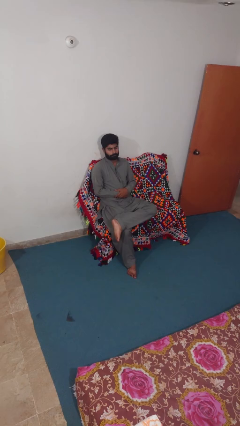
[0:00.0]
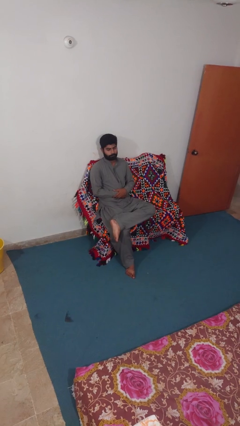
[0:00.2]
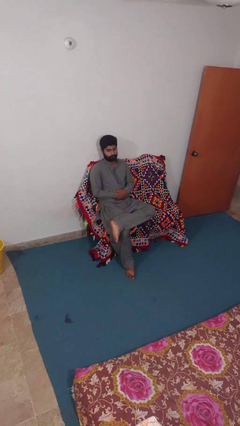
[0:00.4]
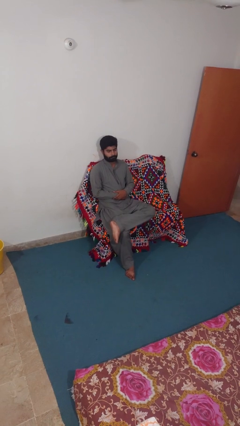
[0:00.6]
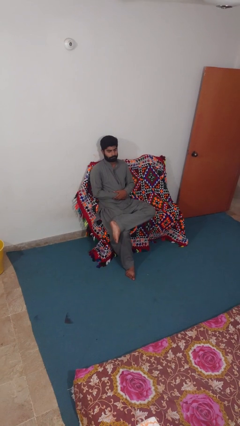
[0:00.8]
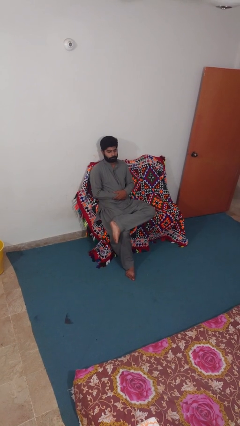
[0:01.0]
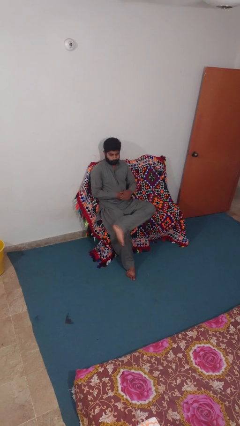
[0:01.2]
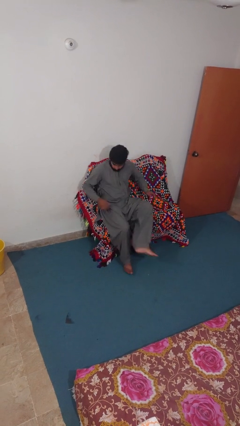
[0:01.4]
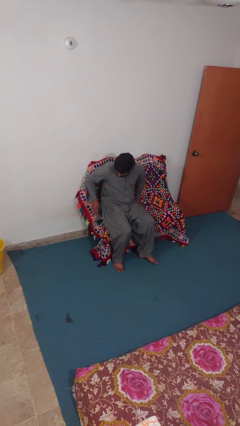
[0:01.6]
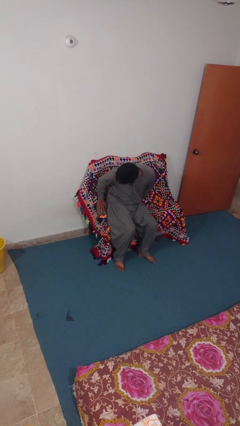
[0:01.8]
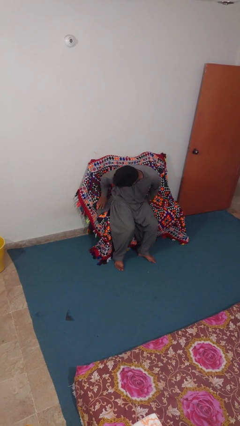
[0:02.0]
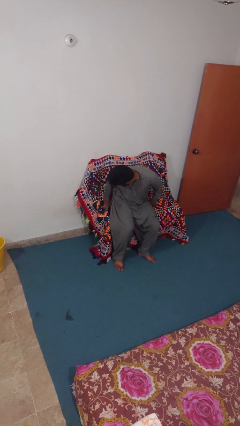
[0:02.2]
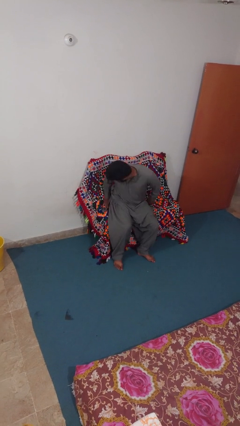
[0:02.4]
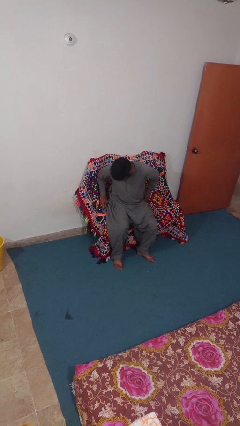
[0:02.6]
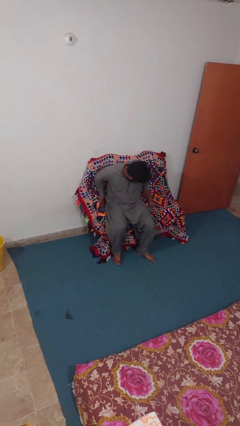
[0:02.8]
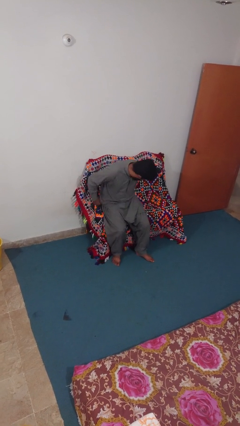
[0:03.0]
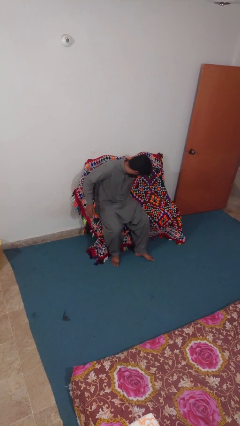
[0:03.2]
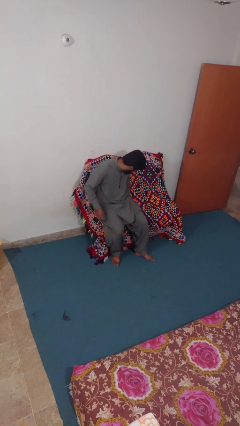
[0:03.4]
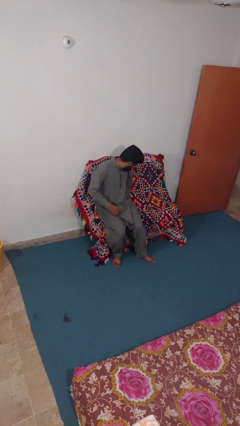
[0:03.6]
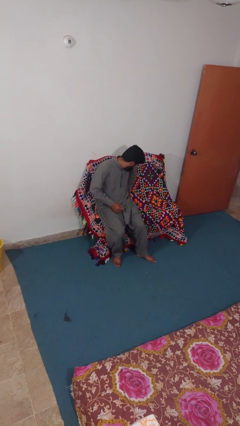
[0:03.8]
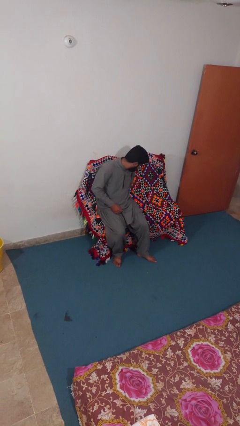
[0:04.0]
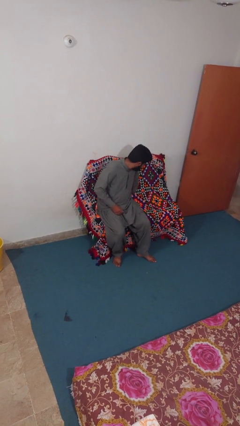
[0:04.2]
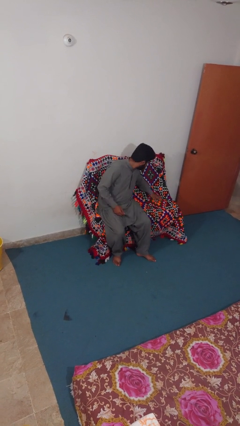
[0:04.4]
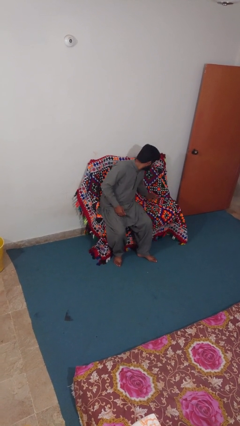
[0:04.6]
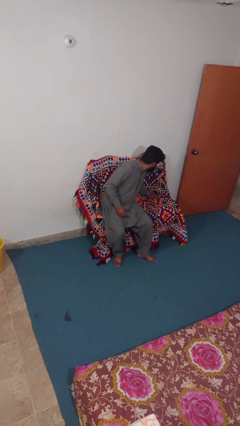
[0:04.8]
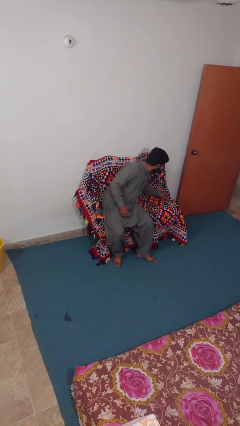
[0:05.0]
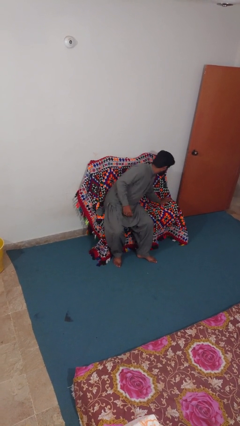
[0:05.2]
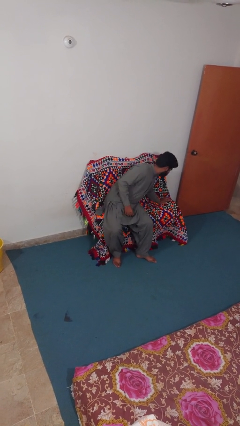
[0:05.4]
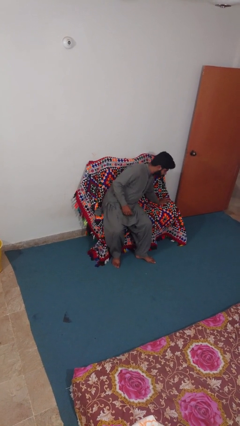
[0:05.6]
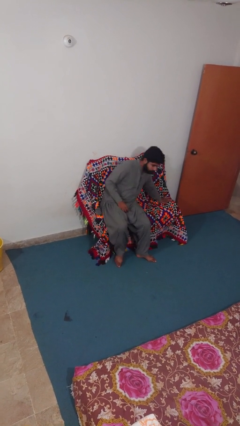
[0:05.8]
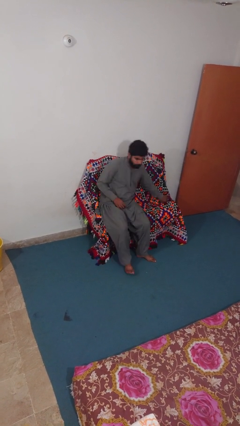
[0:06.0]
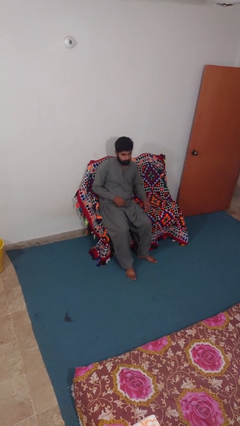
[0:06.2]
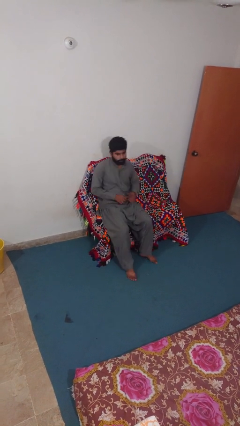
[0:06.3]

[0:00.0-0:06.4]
person searches in couch

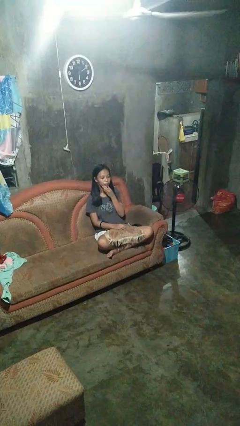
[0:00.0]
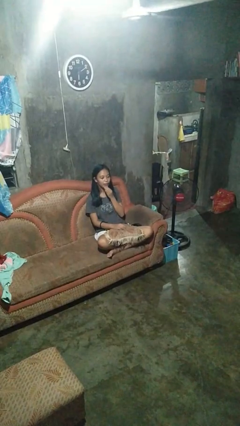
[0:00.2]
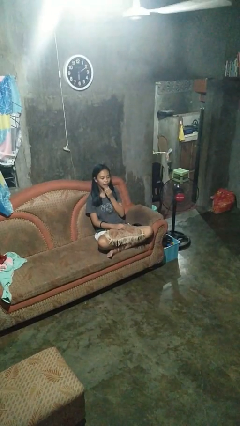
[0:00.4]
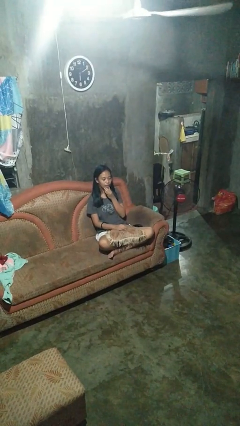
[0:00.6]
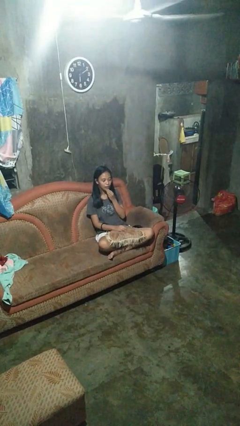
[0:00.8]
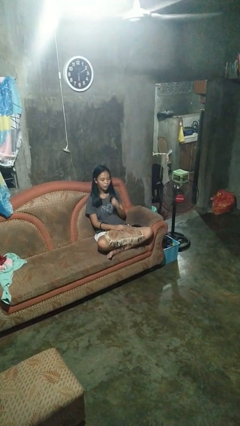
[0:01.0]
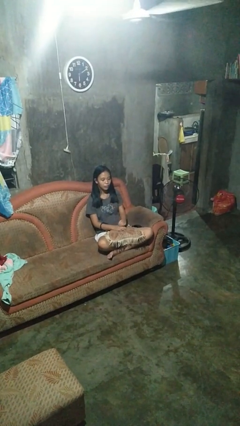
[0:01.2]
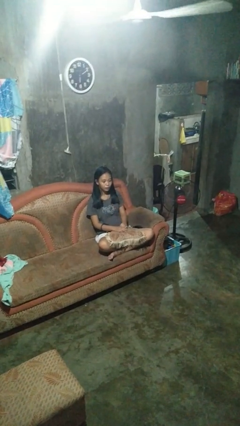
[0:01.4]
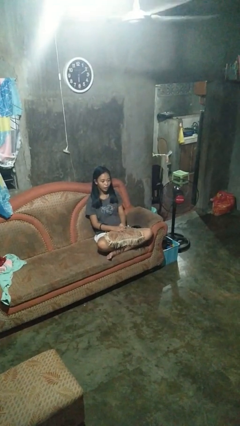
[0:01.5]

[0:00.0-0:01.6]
person strokes chin

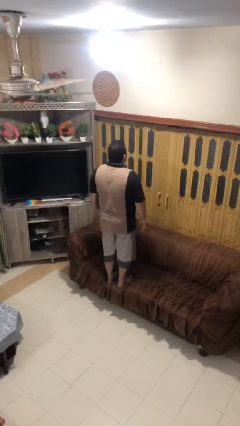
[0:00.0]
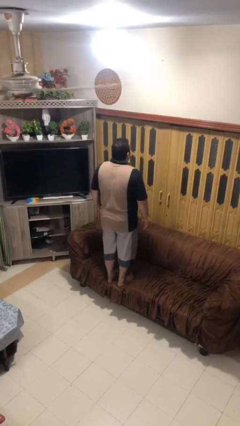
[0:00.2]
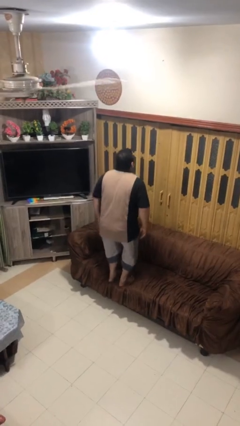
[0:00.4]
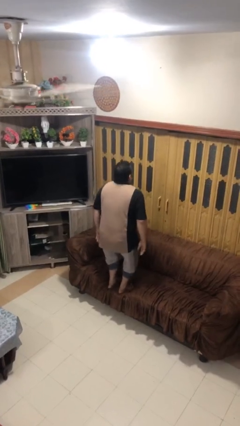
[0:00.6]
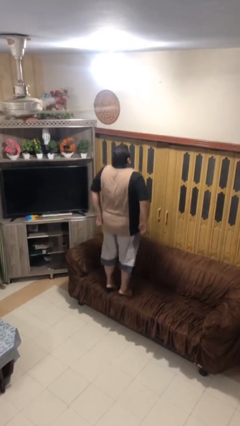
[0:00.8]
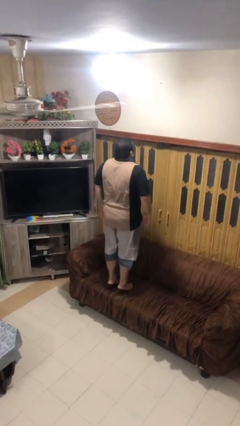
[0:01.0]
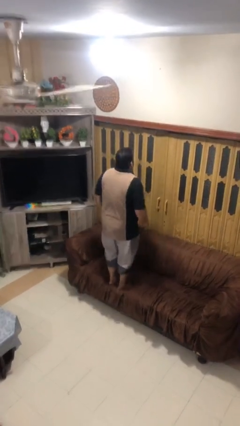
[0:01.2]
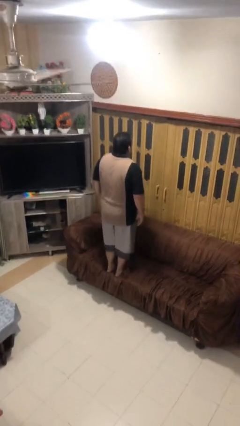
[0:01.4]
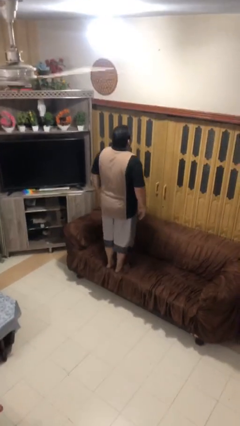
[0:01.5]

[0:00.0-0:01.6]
person jumps on couch

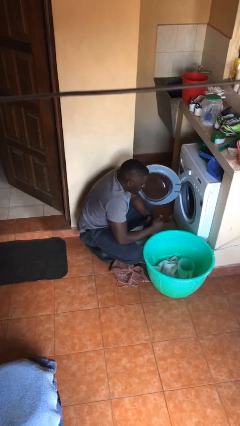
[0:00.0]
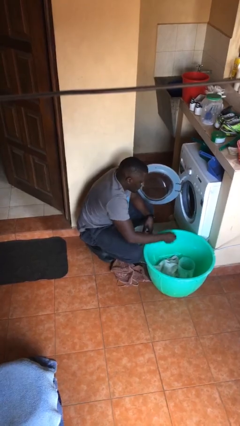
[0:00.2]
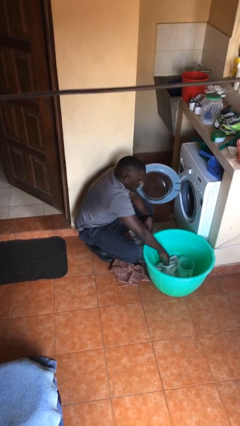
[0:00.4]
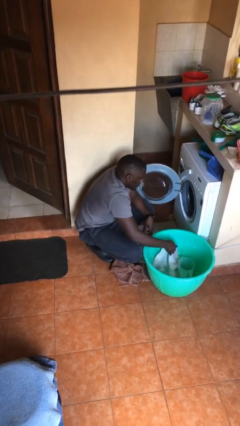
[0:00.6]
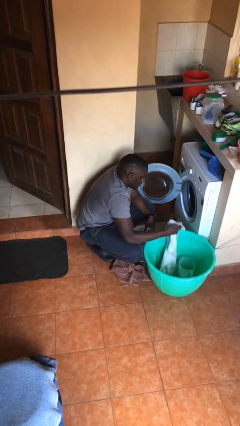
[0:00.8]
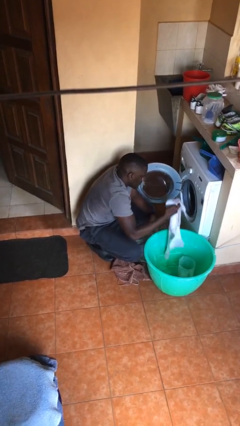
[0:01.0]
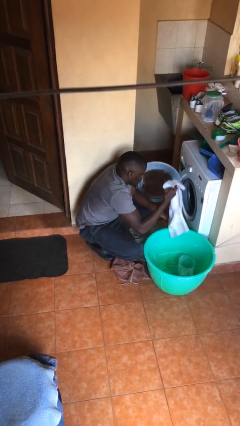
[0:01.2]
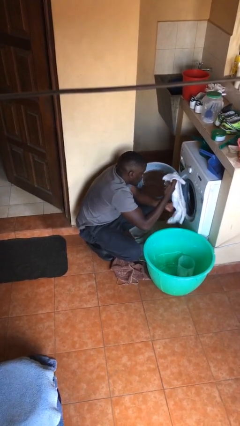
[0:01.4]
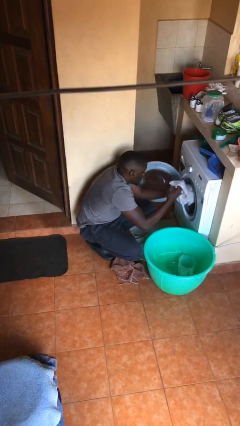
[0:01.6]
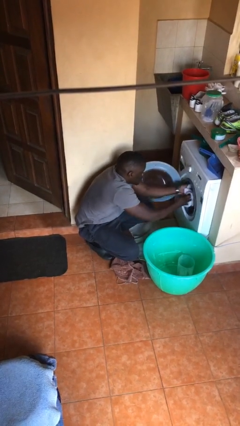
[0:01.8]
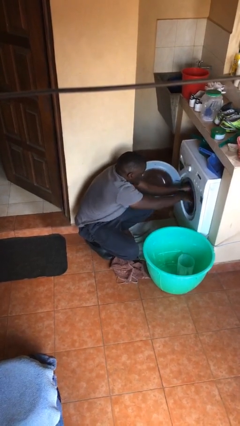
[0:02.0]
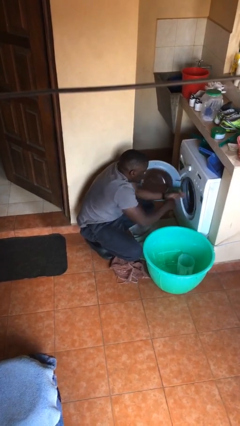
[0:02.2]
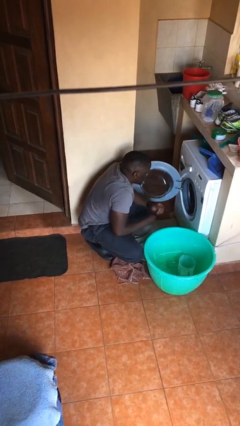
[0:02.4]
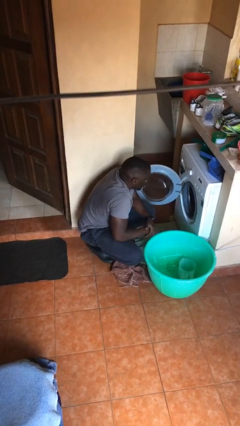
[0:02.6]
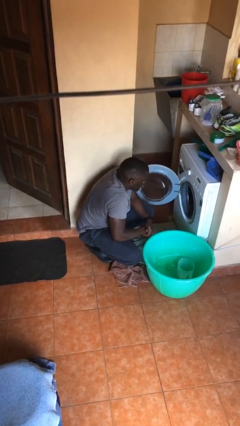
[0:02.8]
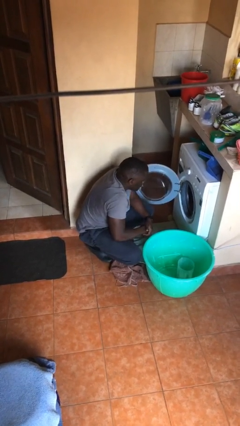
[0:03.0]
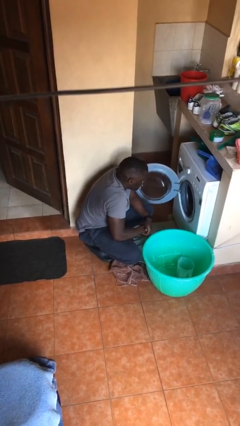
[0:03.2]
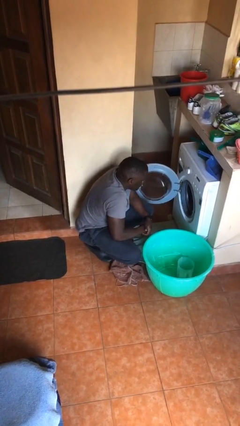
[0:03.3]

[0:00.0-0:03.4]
person loads clotheswasher

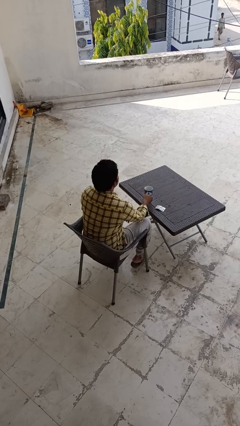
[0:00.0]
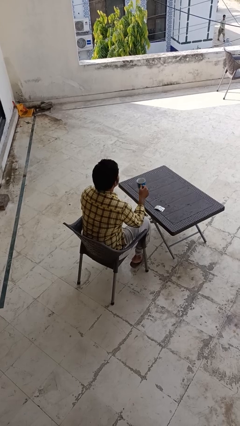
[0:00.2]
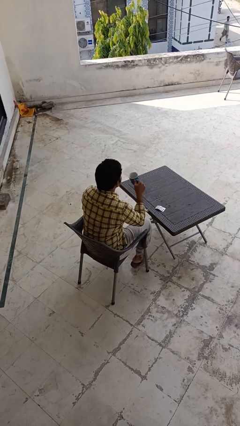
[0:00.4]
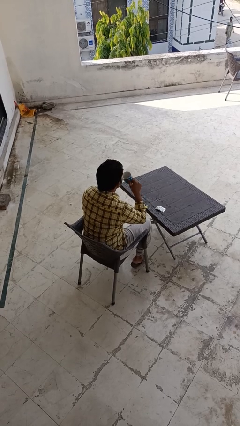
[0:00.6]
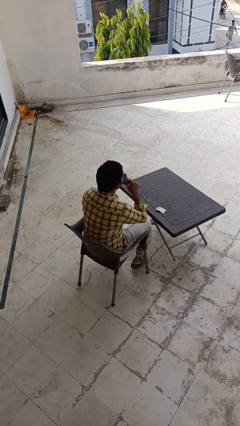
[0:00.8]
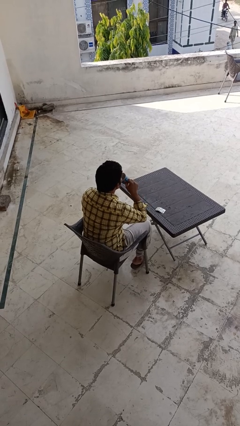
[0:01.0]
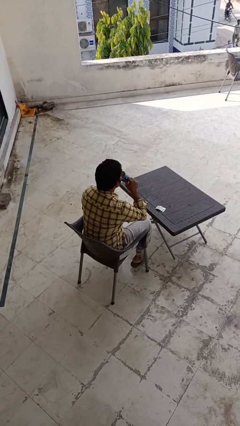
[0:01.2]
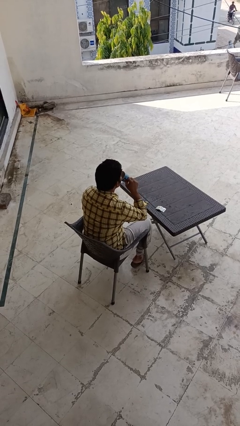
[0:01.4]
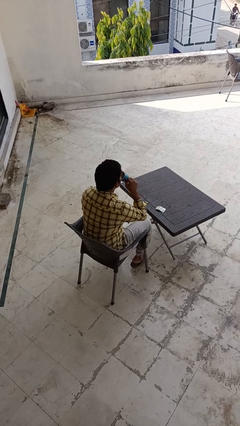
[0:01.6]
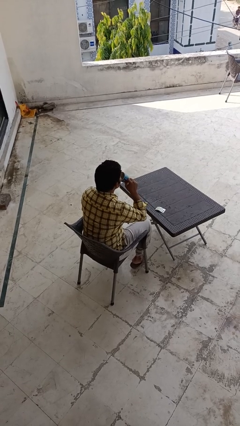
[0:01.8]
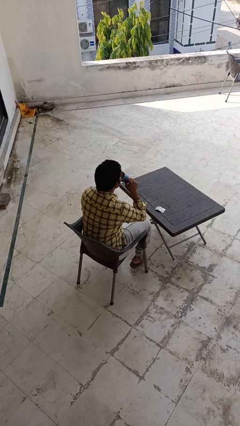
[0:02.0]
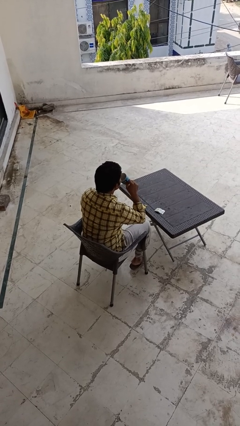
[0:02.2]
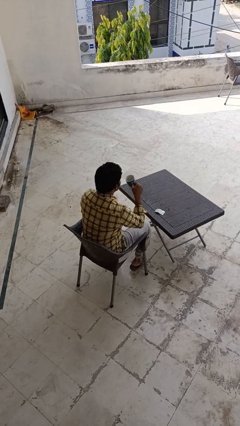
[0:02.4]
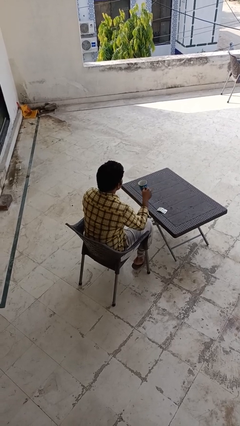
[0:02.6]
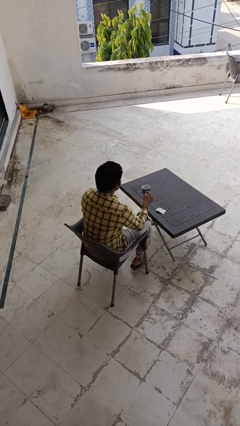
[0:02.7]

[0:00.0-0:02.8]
person drinks from cup

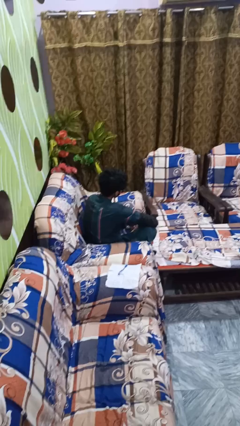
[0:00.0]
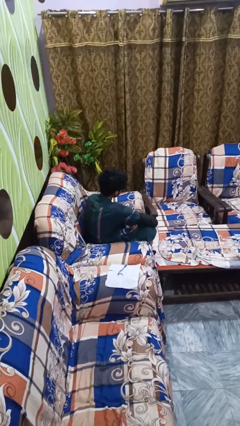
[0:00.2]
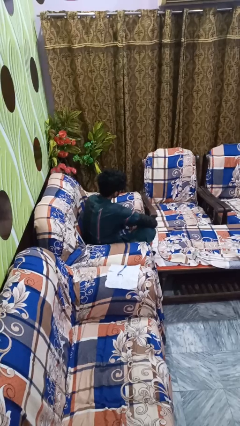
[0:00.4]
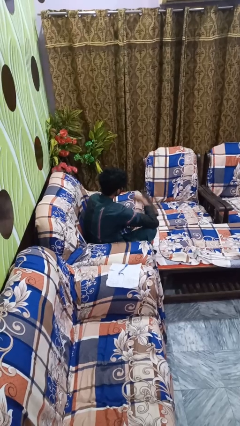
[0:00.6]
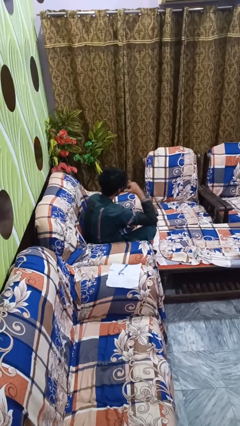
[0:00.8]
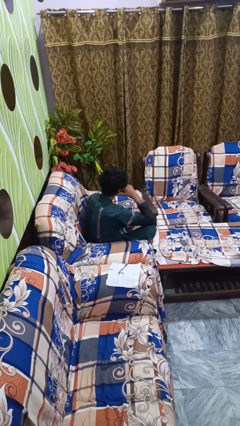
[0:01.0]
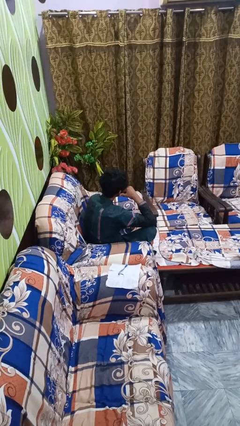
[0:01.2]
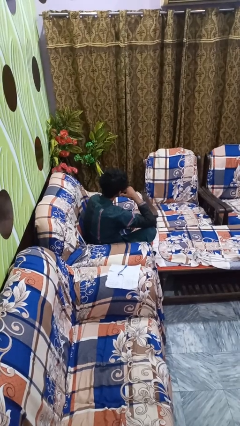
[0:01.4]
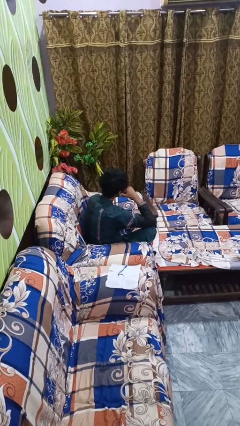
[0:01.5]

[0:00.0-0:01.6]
person gestures call me
